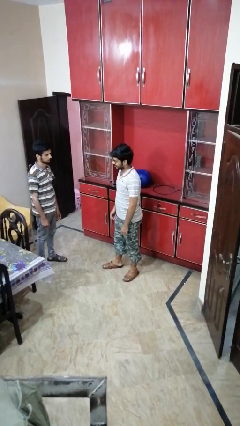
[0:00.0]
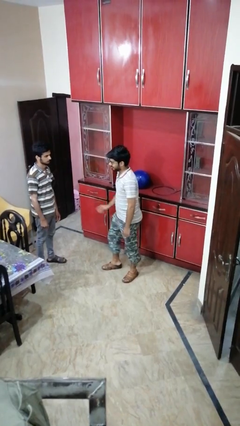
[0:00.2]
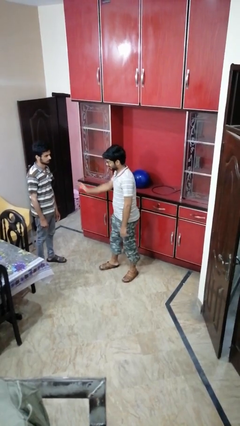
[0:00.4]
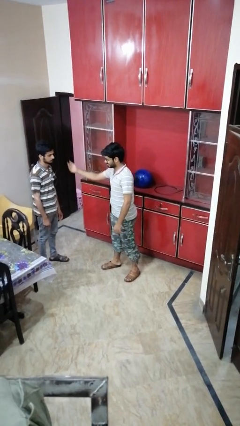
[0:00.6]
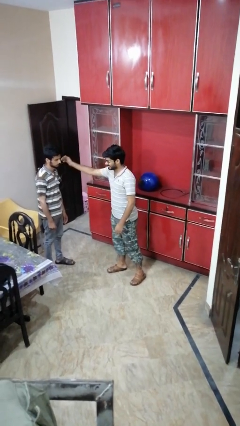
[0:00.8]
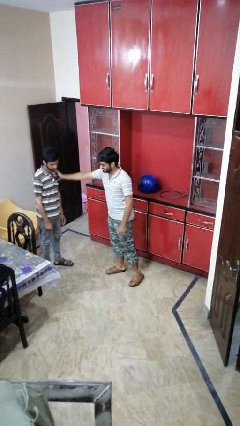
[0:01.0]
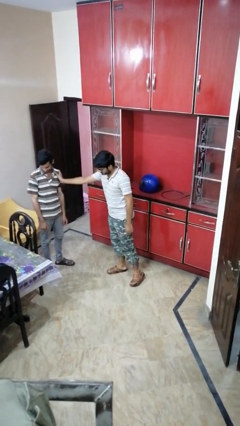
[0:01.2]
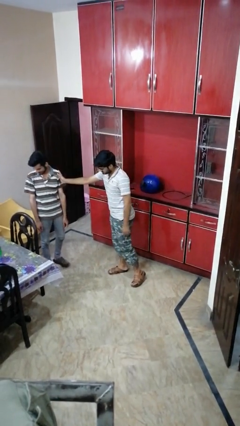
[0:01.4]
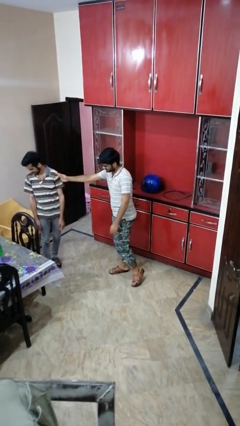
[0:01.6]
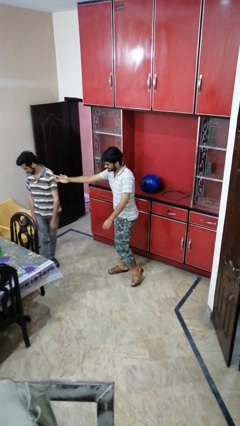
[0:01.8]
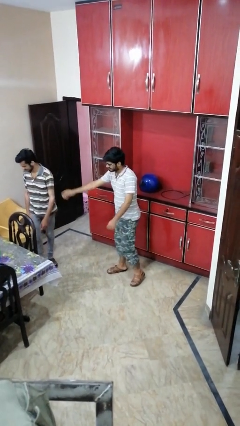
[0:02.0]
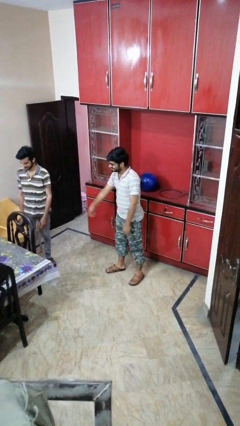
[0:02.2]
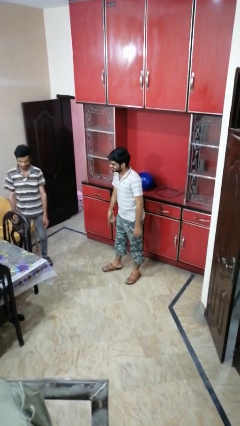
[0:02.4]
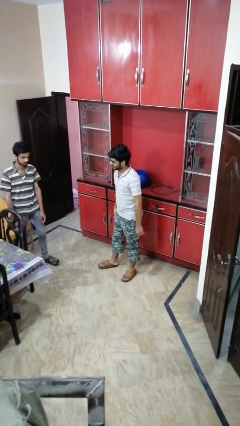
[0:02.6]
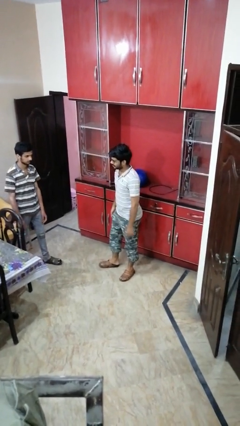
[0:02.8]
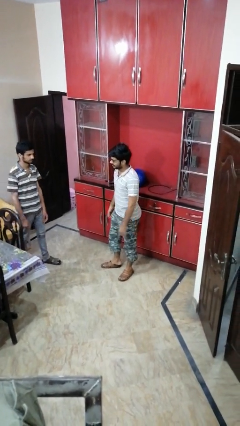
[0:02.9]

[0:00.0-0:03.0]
person shoves person

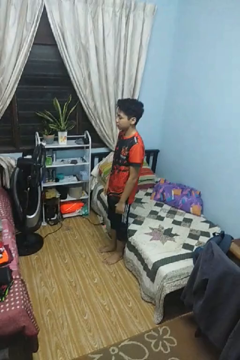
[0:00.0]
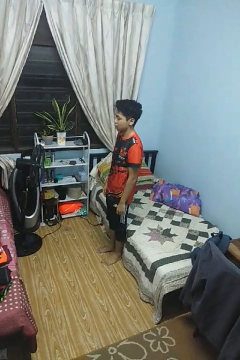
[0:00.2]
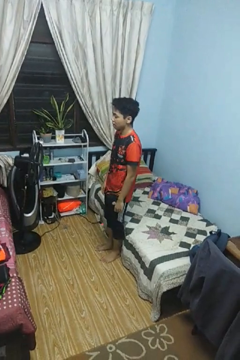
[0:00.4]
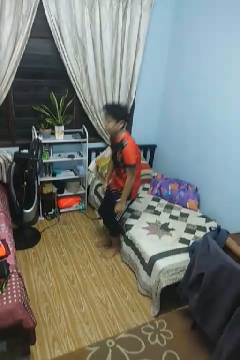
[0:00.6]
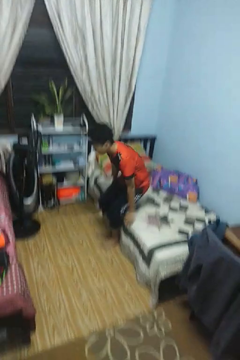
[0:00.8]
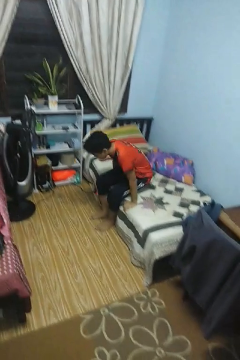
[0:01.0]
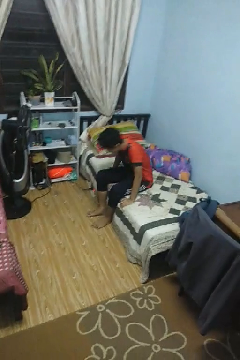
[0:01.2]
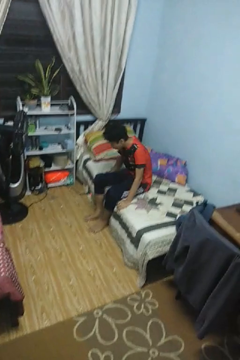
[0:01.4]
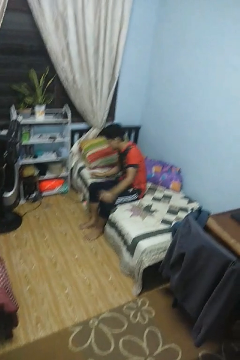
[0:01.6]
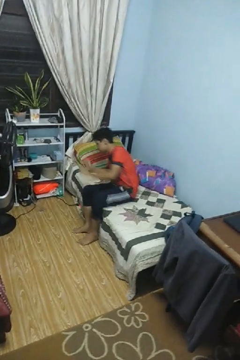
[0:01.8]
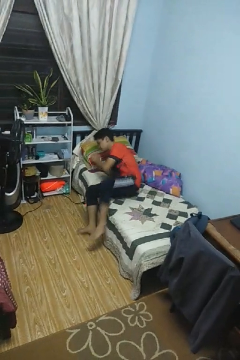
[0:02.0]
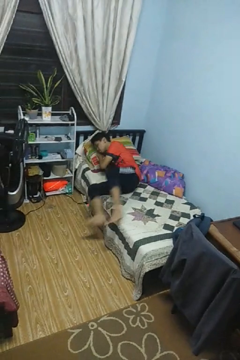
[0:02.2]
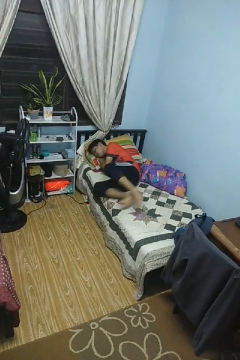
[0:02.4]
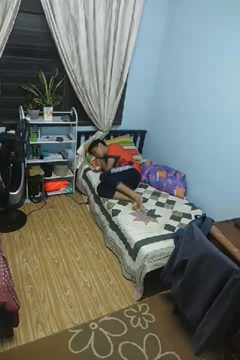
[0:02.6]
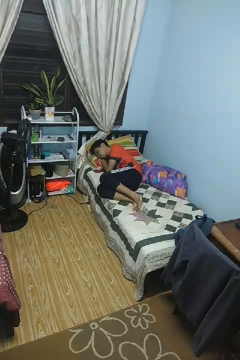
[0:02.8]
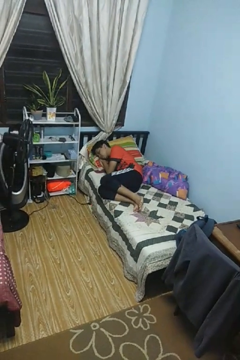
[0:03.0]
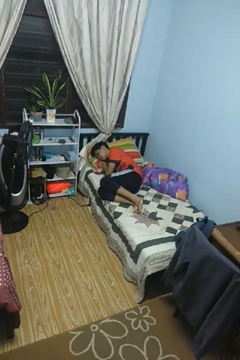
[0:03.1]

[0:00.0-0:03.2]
person lies down on bed

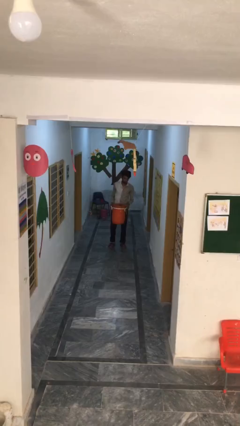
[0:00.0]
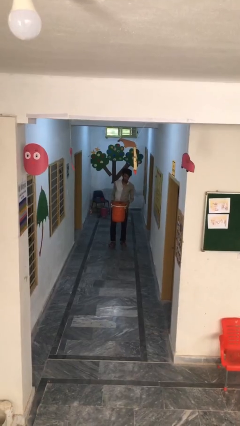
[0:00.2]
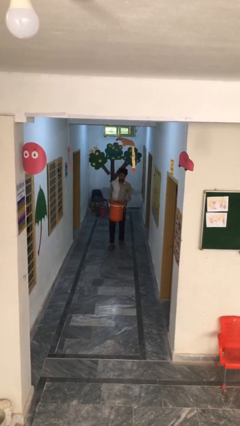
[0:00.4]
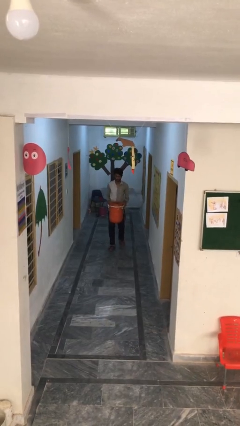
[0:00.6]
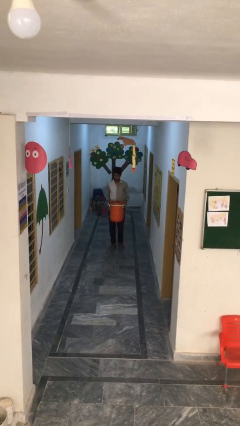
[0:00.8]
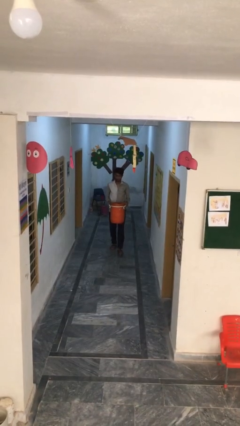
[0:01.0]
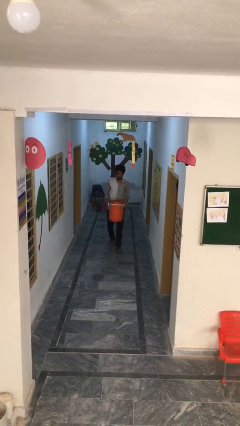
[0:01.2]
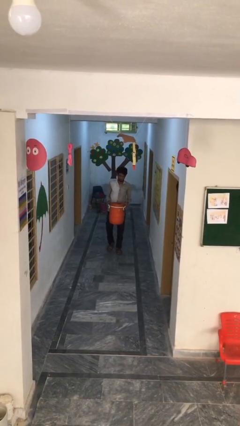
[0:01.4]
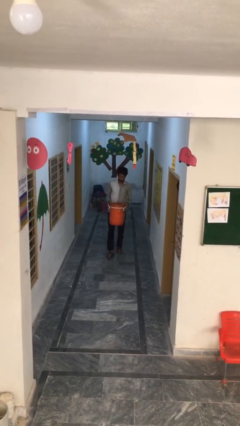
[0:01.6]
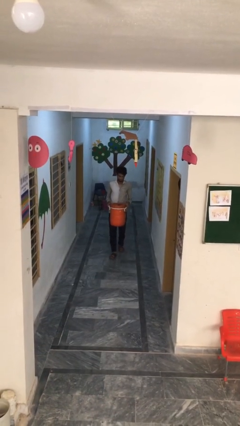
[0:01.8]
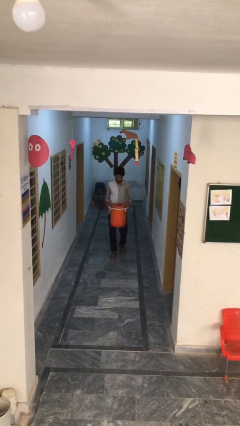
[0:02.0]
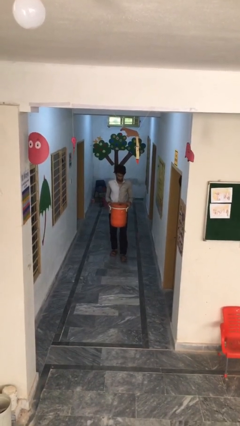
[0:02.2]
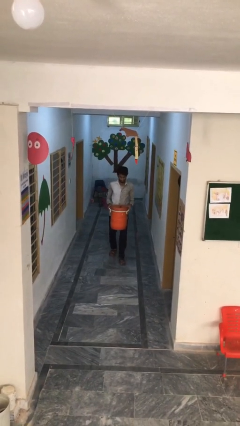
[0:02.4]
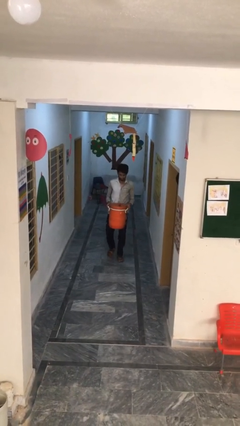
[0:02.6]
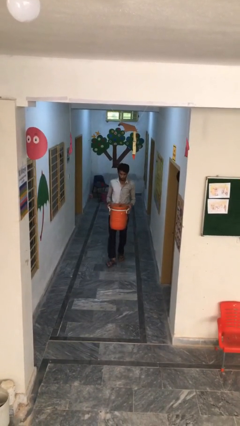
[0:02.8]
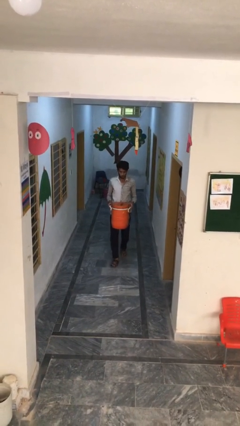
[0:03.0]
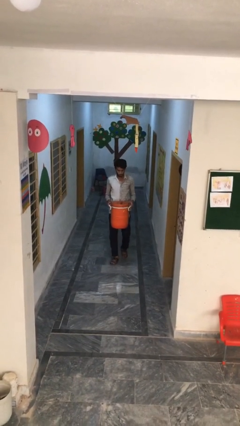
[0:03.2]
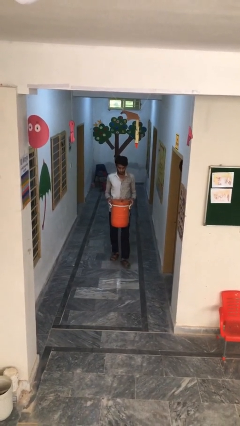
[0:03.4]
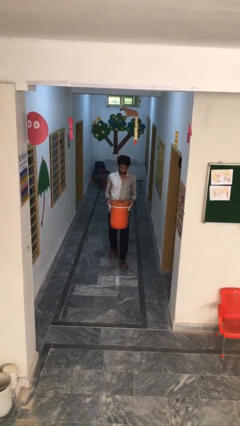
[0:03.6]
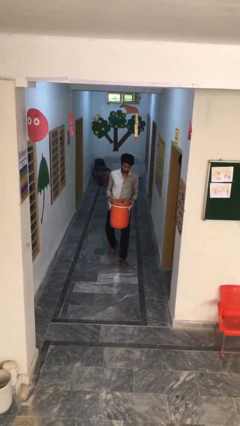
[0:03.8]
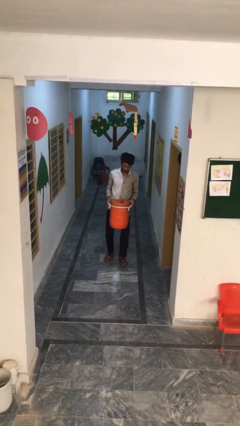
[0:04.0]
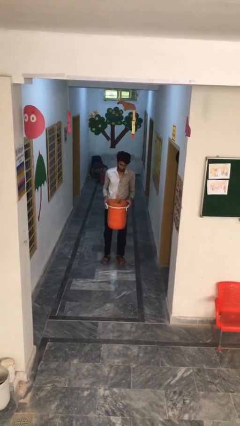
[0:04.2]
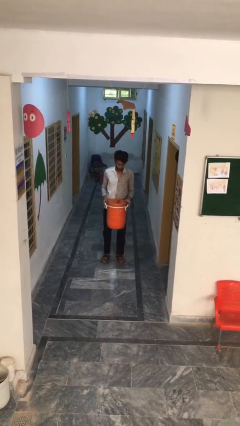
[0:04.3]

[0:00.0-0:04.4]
person carries heavy object

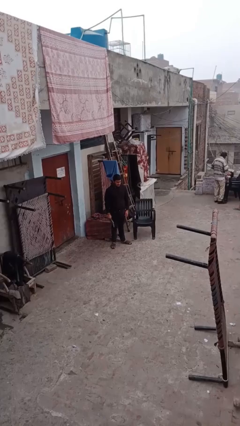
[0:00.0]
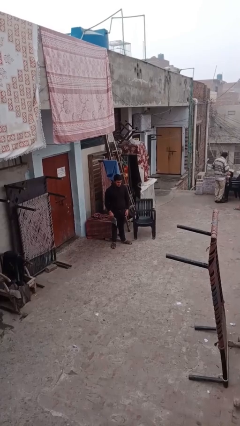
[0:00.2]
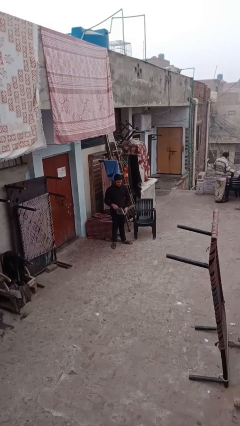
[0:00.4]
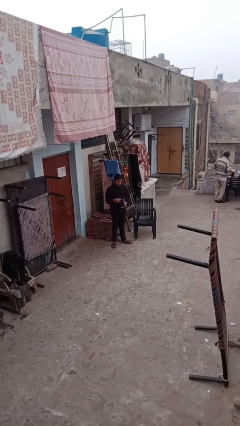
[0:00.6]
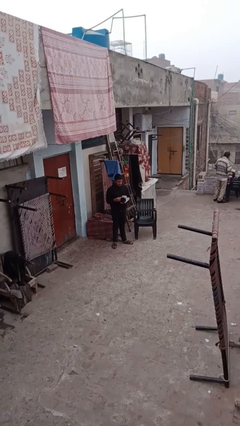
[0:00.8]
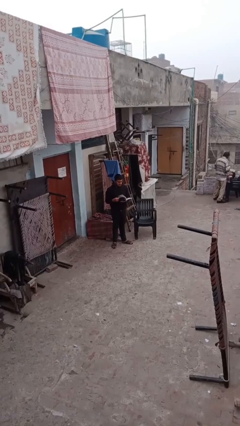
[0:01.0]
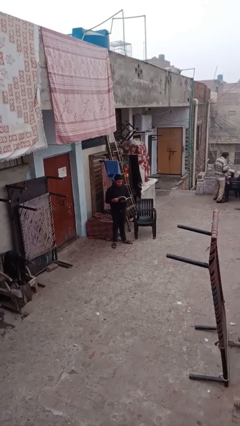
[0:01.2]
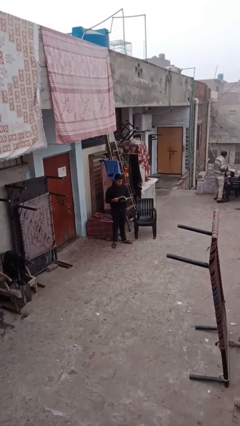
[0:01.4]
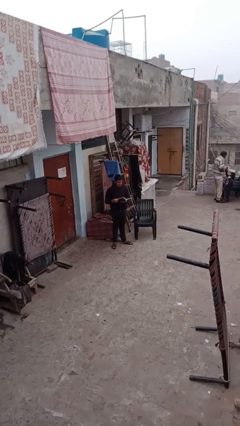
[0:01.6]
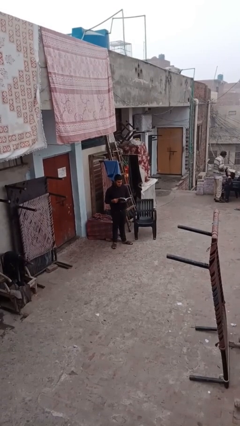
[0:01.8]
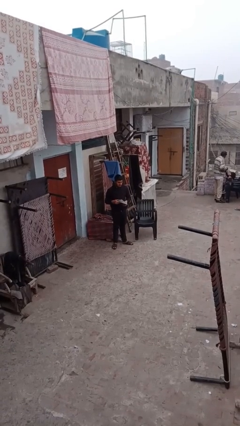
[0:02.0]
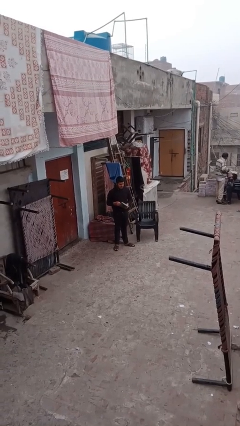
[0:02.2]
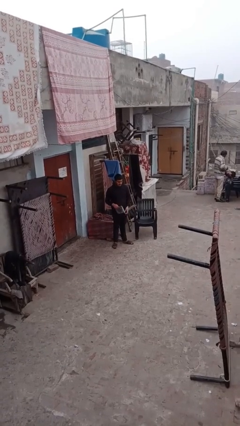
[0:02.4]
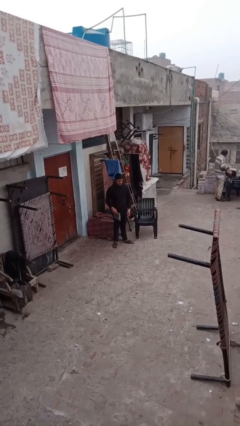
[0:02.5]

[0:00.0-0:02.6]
person reads document

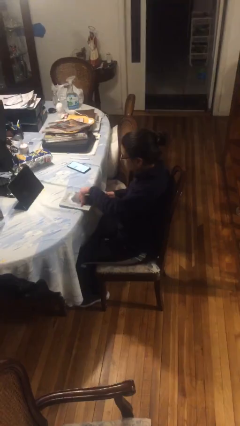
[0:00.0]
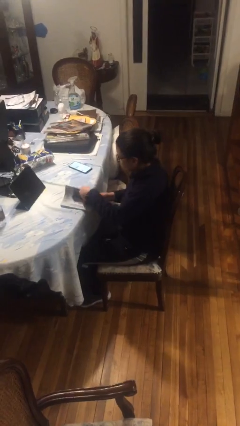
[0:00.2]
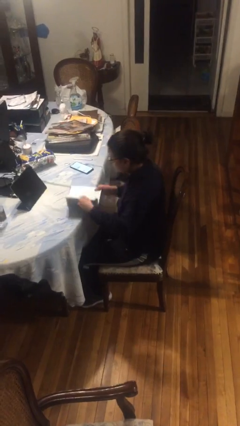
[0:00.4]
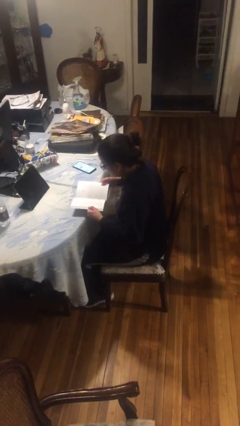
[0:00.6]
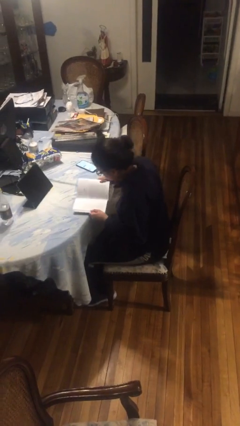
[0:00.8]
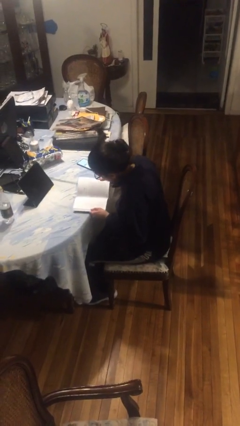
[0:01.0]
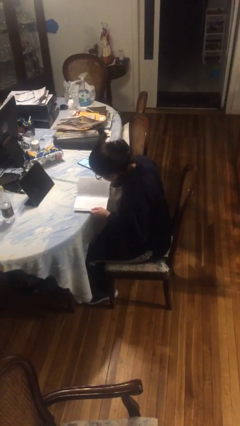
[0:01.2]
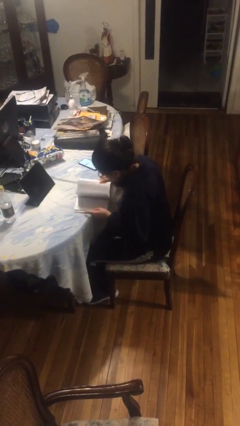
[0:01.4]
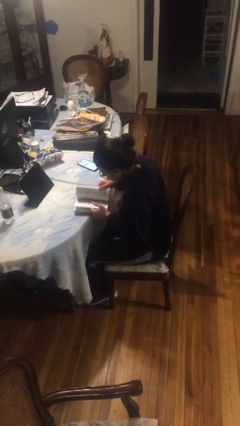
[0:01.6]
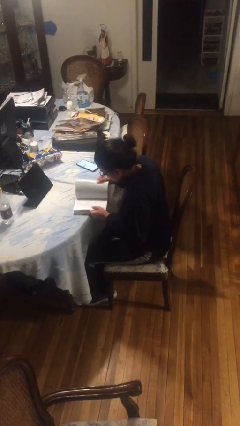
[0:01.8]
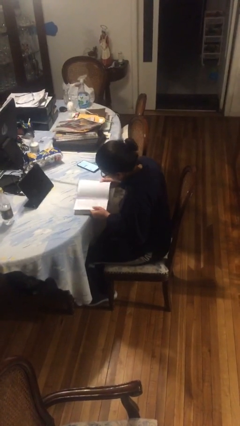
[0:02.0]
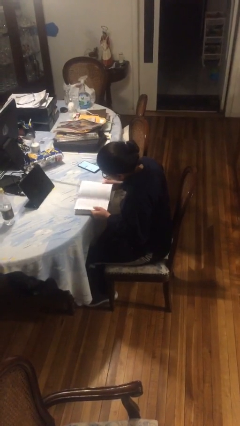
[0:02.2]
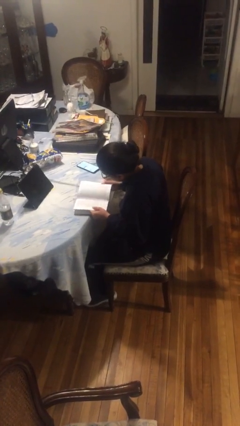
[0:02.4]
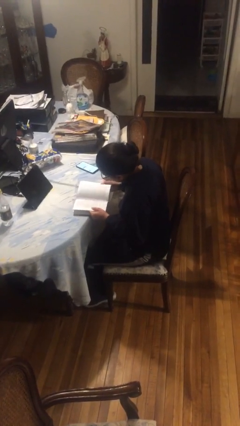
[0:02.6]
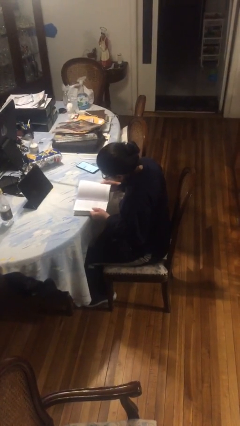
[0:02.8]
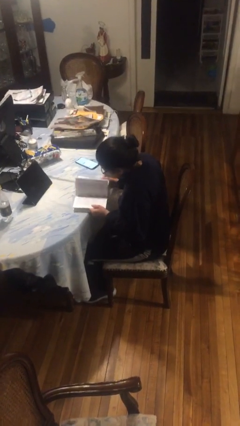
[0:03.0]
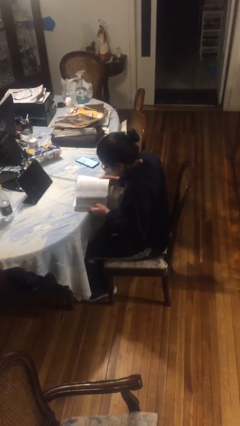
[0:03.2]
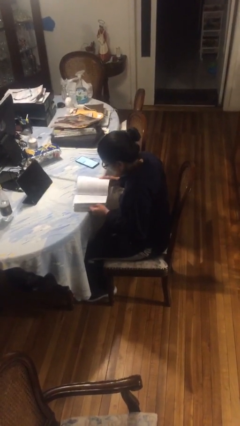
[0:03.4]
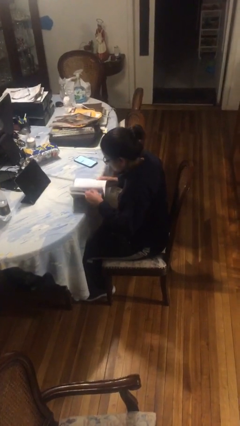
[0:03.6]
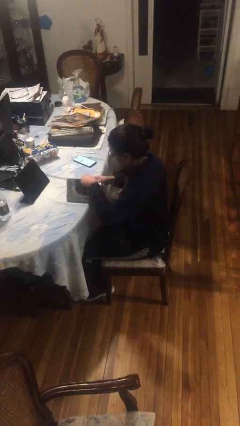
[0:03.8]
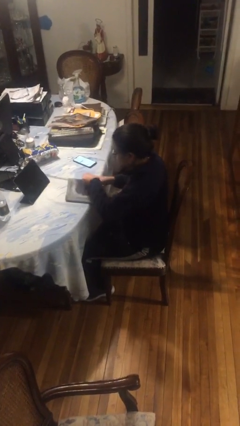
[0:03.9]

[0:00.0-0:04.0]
person reads book

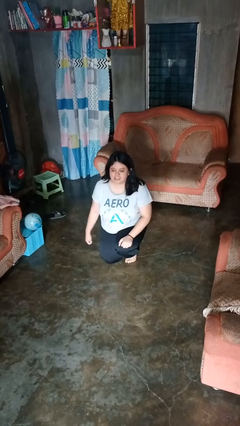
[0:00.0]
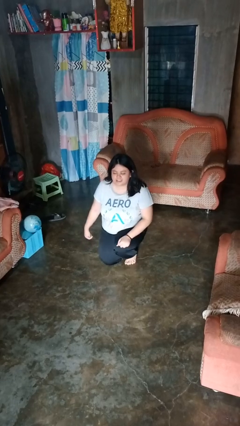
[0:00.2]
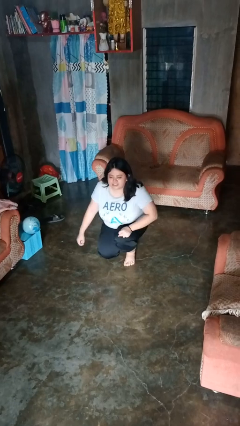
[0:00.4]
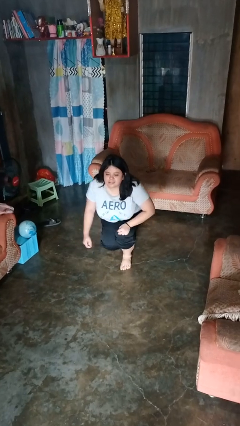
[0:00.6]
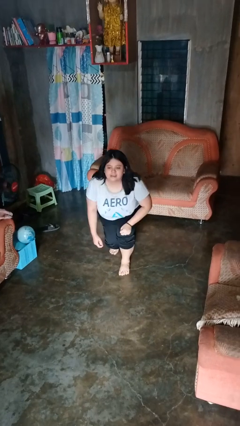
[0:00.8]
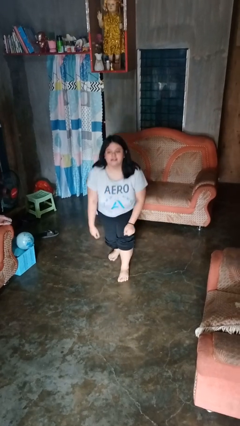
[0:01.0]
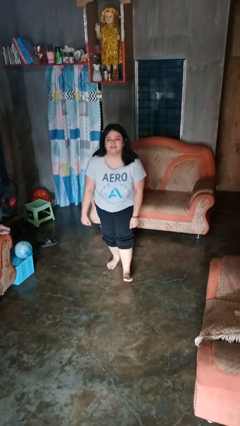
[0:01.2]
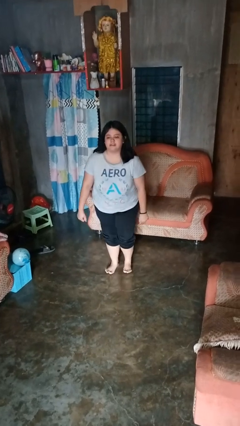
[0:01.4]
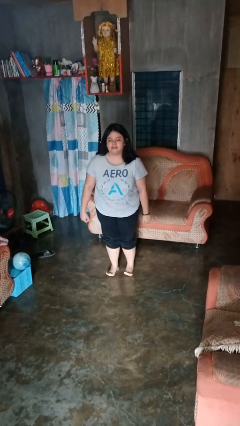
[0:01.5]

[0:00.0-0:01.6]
person stands up from floor
